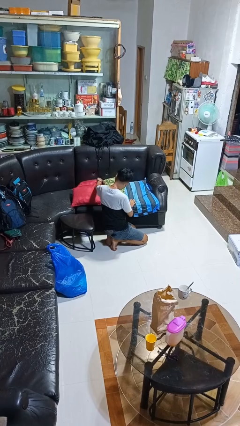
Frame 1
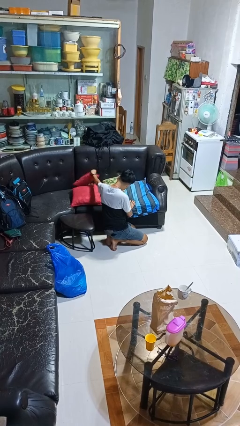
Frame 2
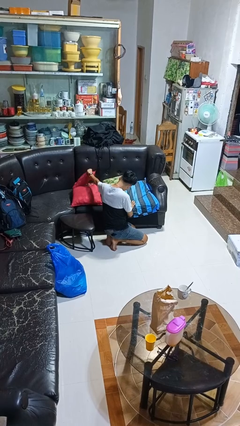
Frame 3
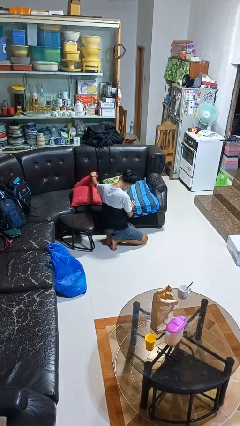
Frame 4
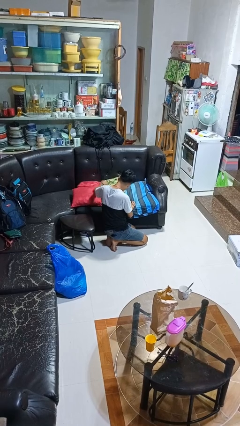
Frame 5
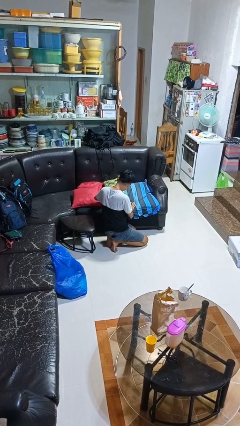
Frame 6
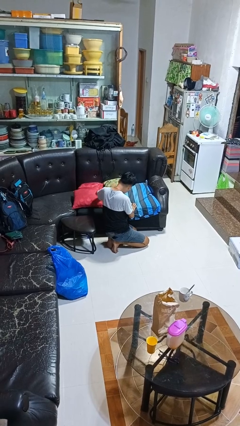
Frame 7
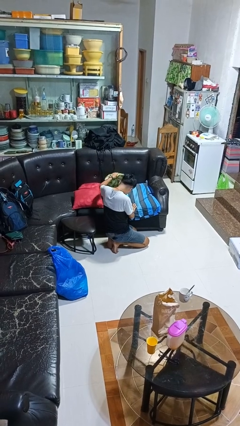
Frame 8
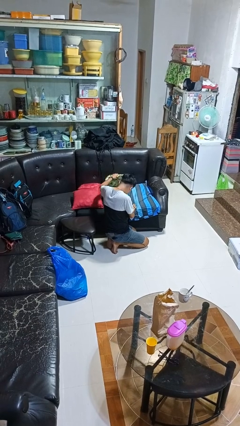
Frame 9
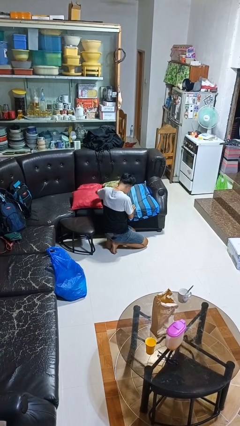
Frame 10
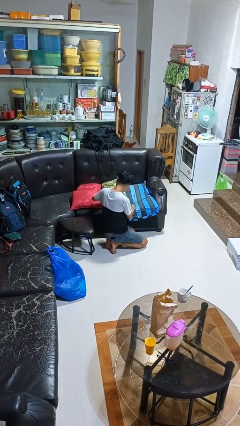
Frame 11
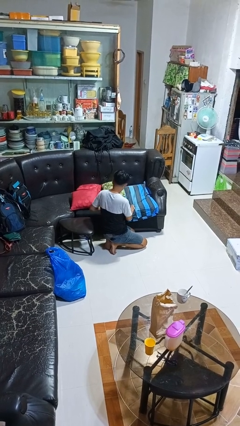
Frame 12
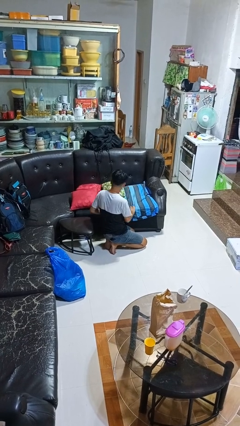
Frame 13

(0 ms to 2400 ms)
person searches in couch

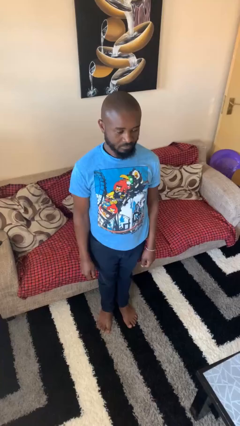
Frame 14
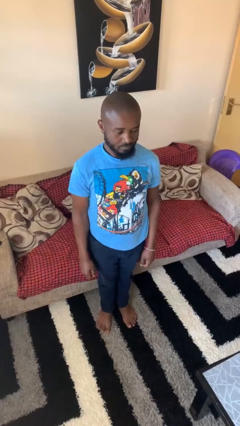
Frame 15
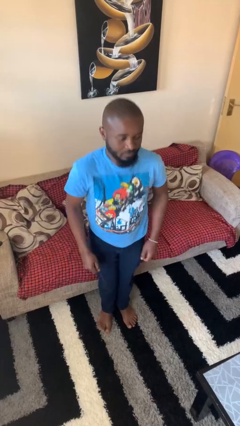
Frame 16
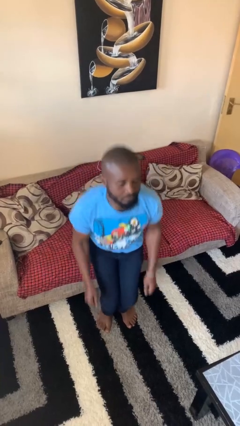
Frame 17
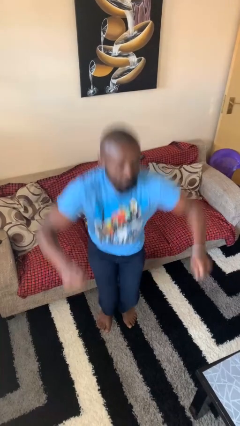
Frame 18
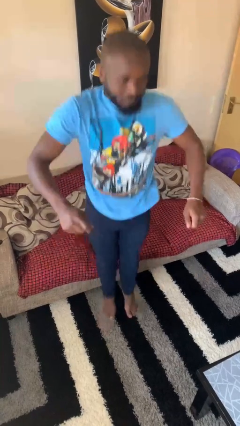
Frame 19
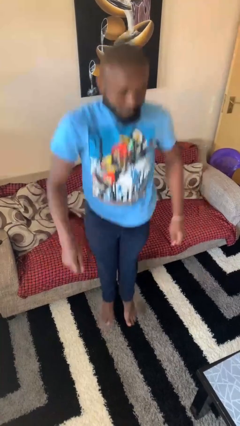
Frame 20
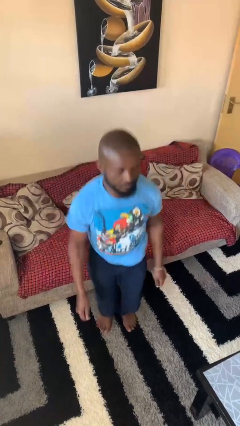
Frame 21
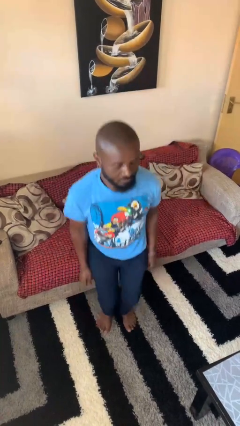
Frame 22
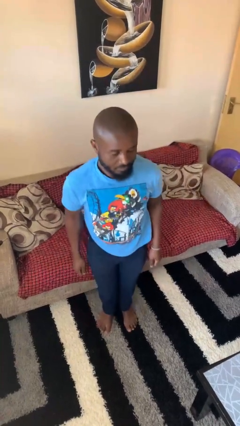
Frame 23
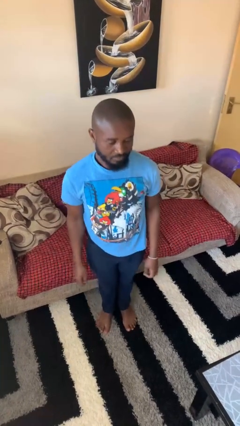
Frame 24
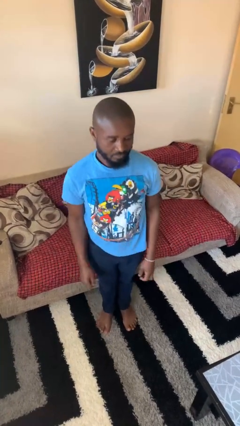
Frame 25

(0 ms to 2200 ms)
person jumps

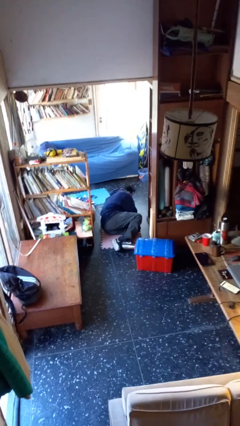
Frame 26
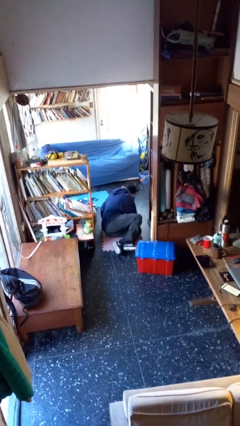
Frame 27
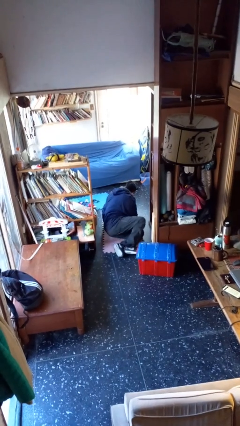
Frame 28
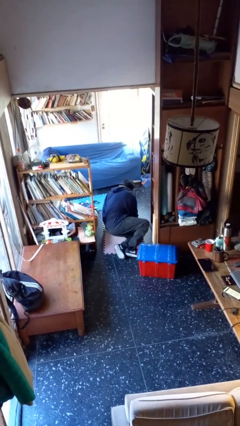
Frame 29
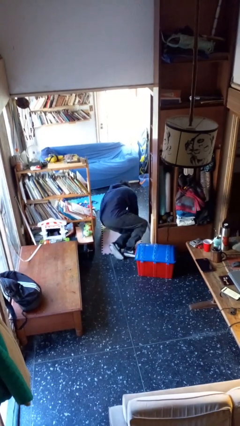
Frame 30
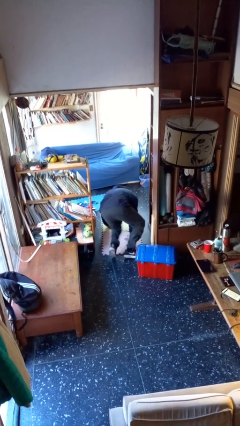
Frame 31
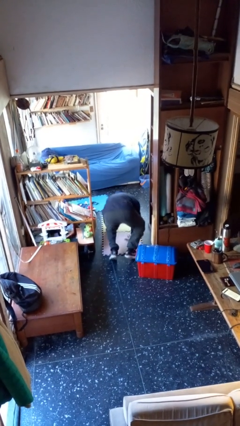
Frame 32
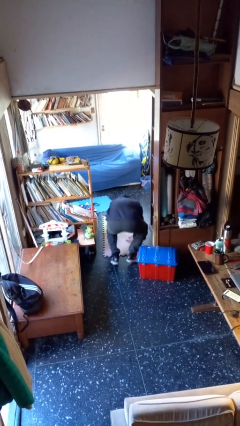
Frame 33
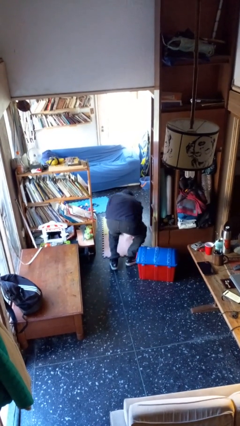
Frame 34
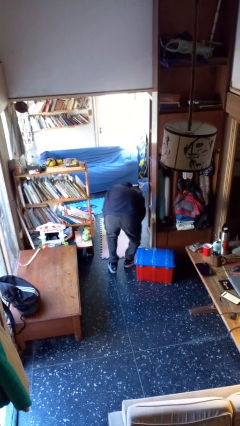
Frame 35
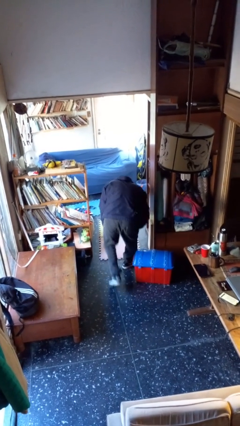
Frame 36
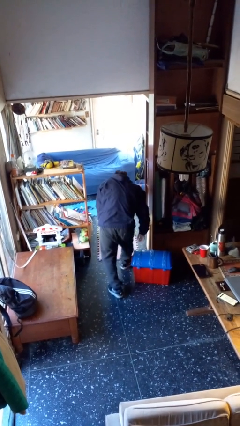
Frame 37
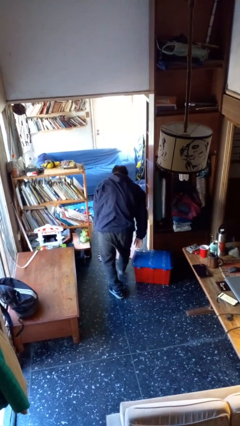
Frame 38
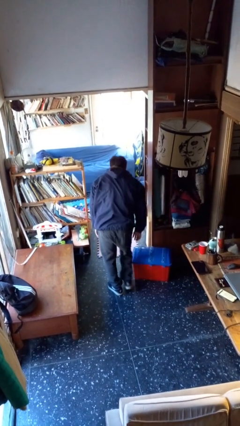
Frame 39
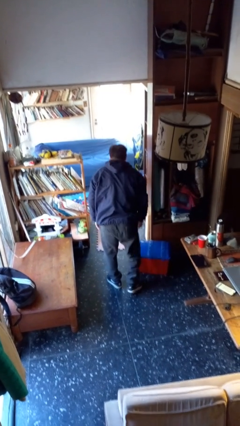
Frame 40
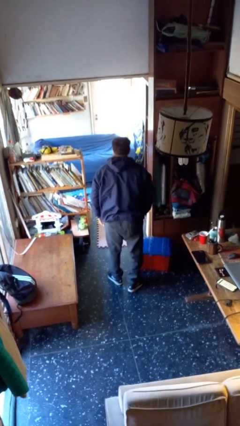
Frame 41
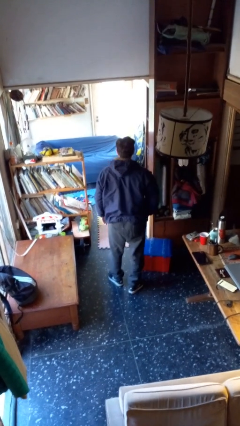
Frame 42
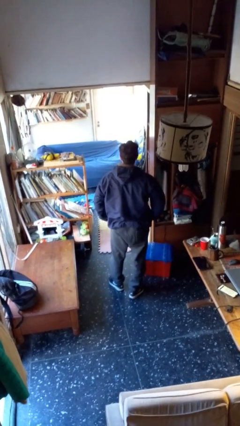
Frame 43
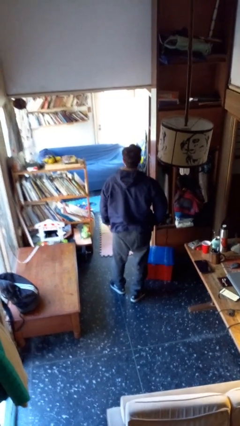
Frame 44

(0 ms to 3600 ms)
person stands up from floor

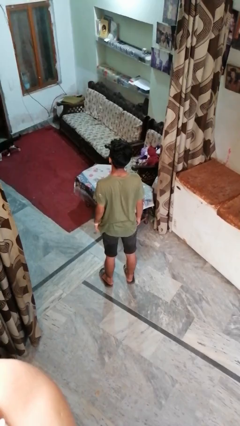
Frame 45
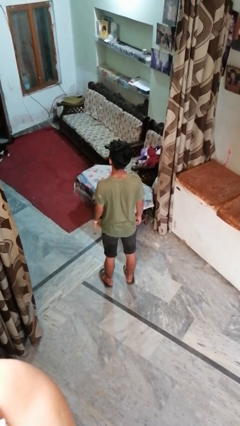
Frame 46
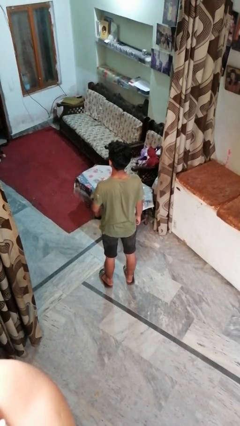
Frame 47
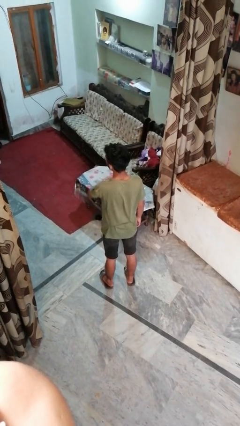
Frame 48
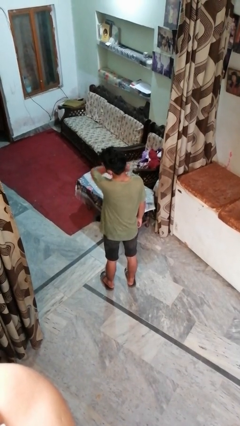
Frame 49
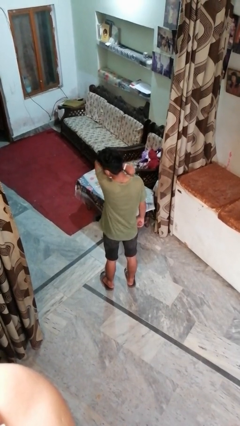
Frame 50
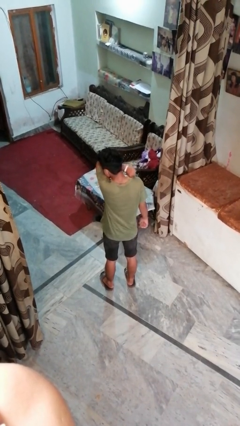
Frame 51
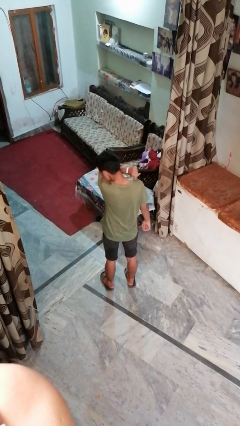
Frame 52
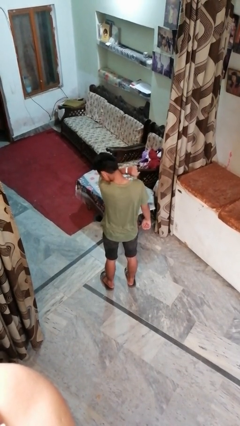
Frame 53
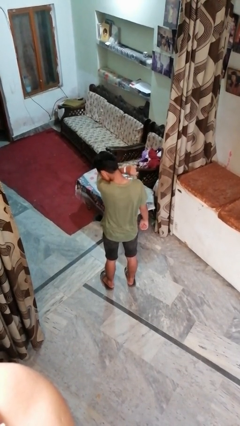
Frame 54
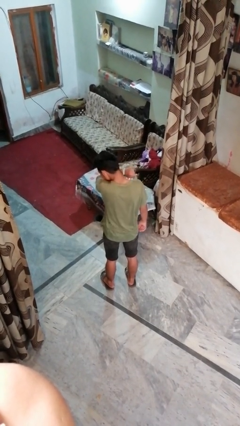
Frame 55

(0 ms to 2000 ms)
person sneezes into arm

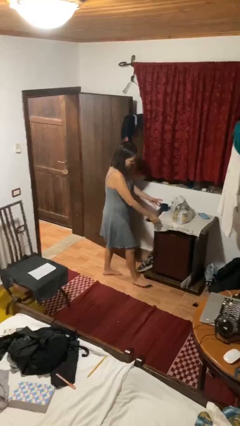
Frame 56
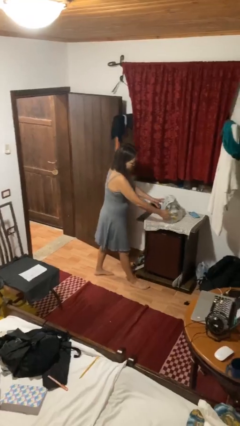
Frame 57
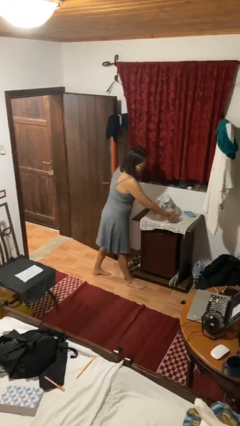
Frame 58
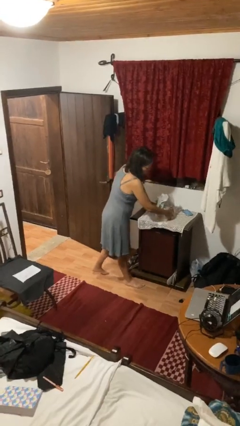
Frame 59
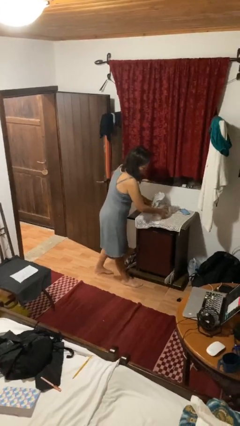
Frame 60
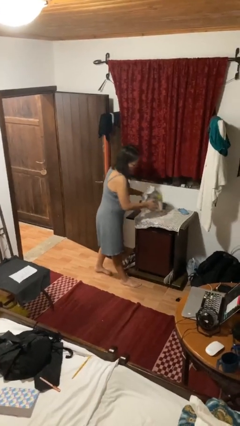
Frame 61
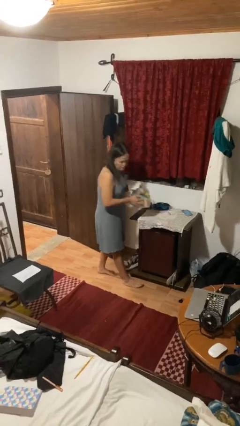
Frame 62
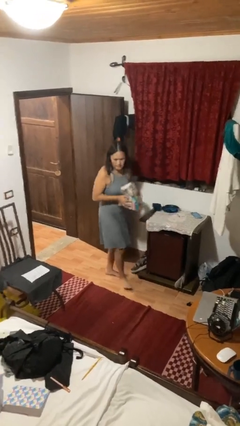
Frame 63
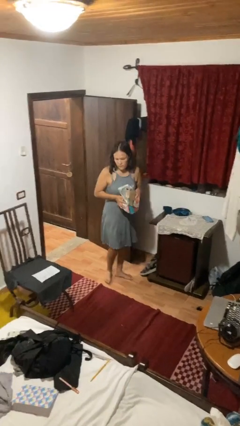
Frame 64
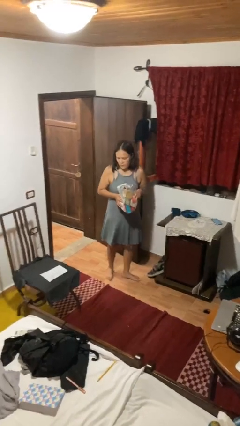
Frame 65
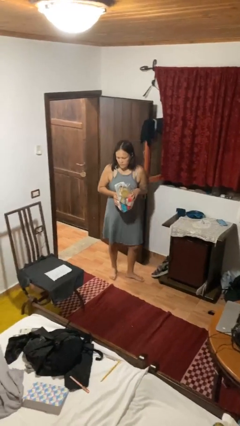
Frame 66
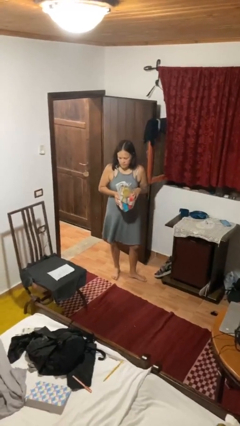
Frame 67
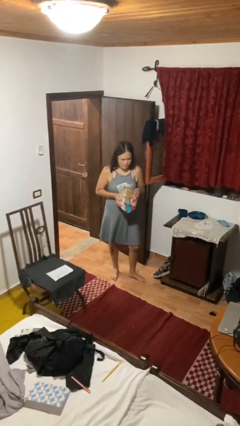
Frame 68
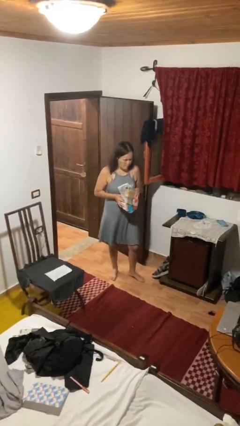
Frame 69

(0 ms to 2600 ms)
person picks up object from countertop

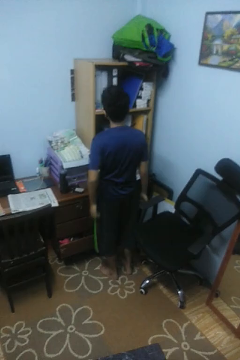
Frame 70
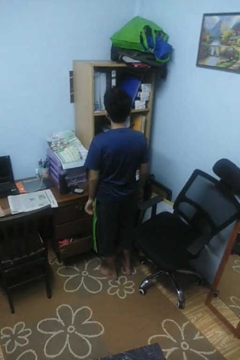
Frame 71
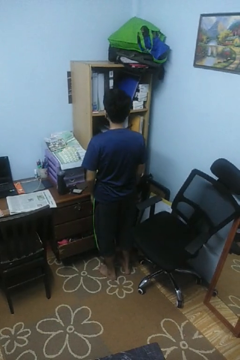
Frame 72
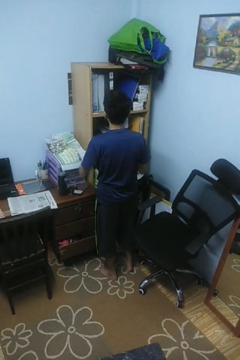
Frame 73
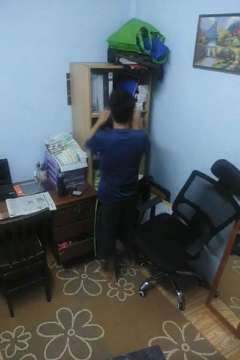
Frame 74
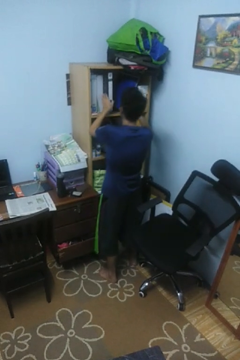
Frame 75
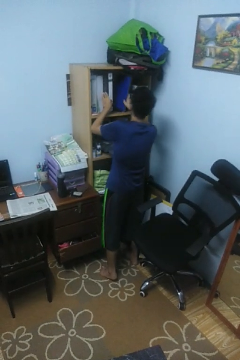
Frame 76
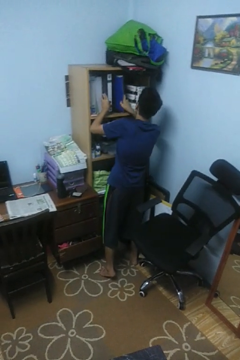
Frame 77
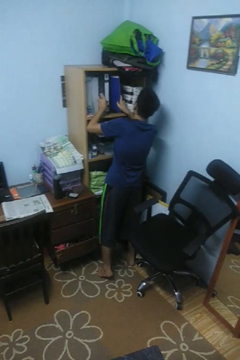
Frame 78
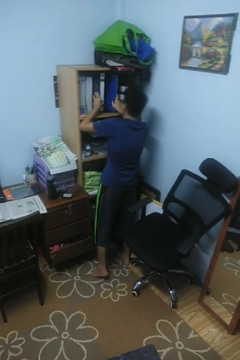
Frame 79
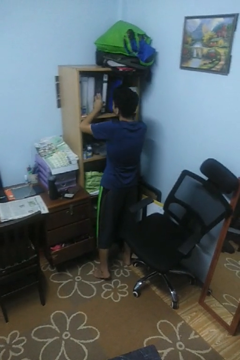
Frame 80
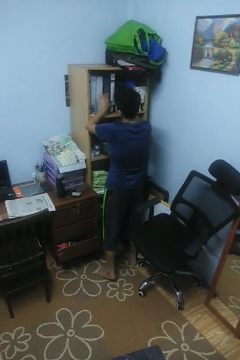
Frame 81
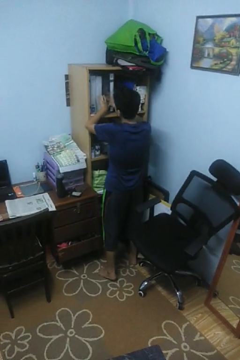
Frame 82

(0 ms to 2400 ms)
person searches in cabinet

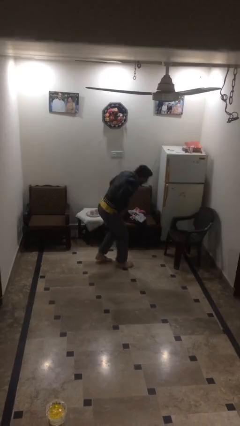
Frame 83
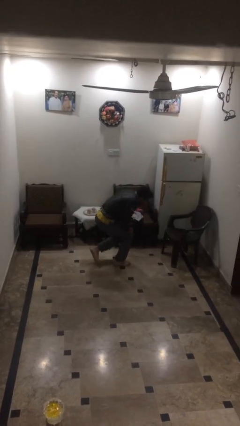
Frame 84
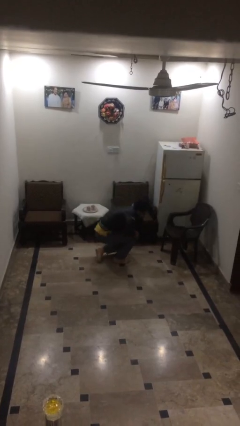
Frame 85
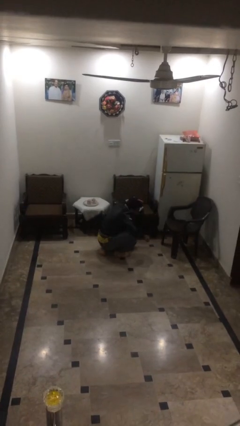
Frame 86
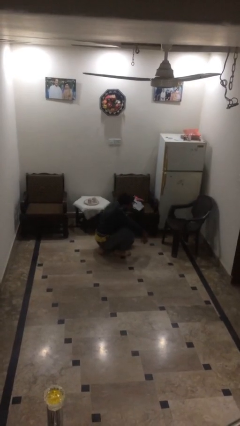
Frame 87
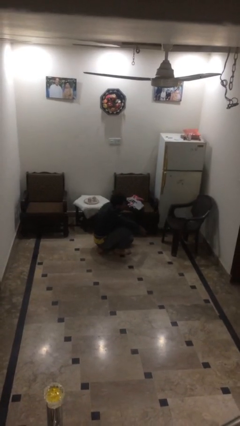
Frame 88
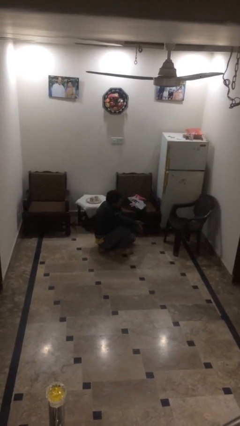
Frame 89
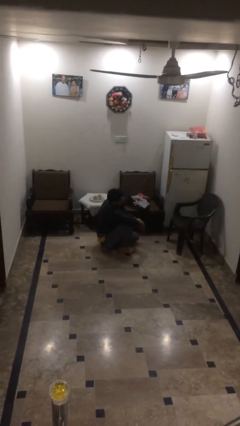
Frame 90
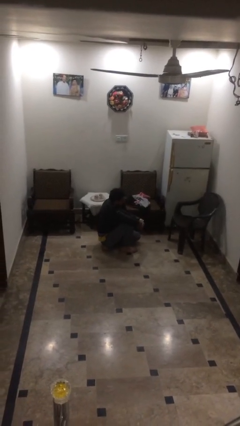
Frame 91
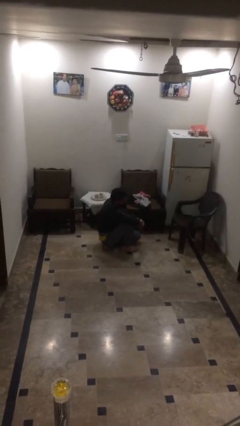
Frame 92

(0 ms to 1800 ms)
person sits down

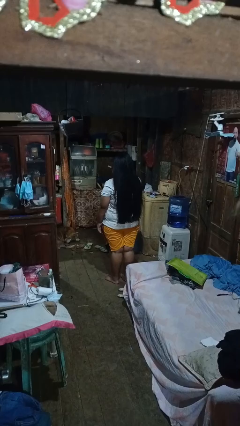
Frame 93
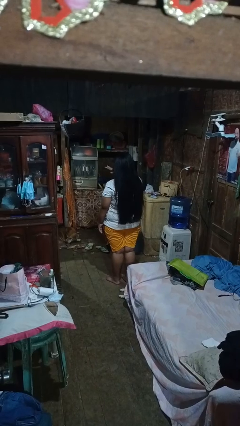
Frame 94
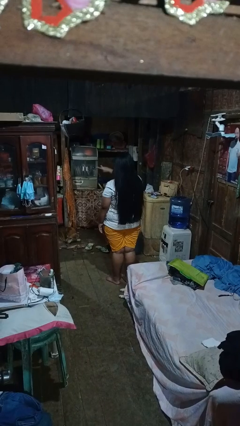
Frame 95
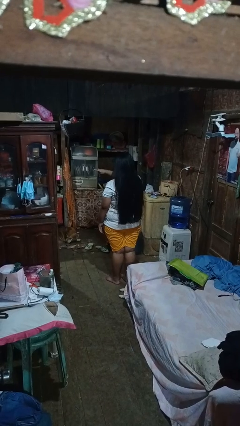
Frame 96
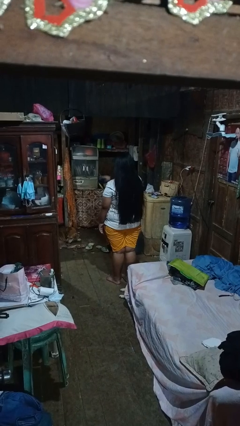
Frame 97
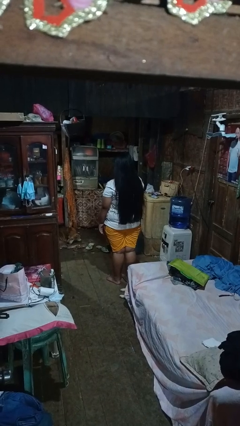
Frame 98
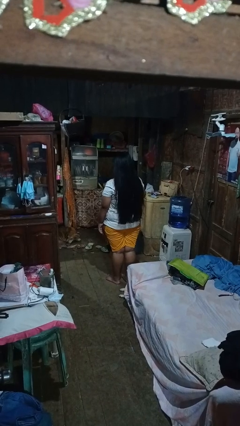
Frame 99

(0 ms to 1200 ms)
person gestures watch closely
